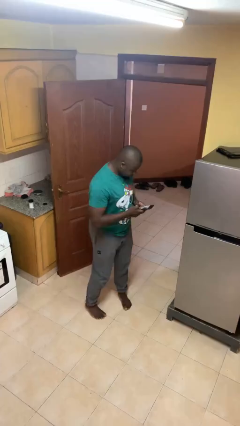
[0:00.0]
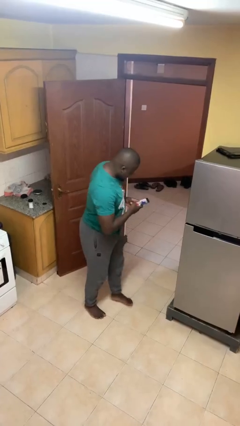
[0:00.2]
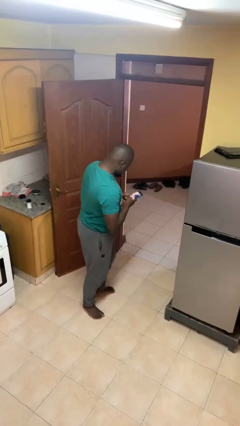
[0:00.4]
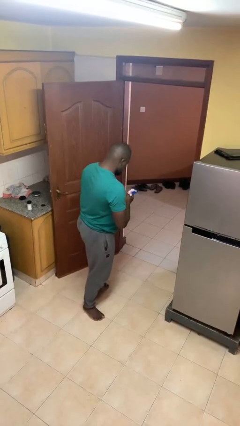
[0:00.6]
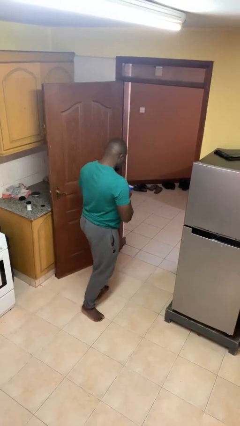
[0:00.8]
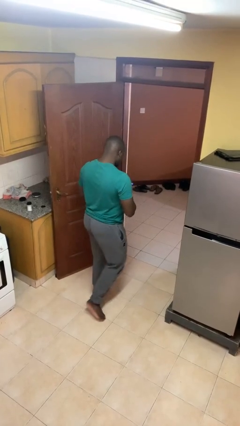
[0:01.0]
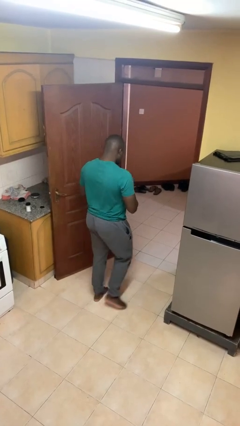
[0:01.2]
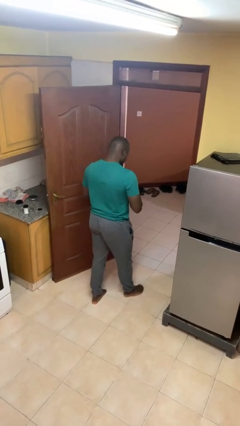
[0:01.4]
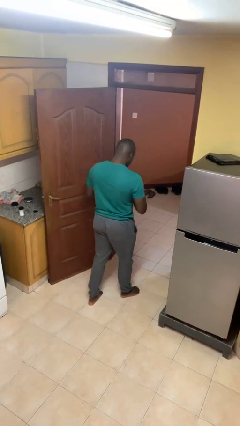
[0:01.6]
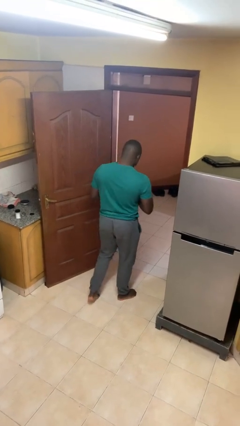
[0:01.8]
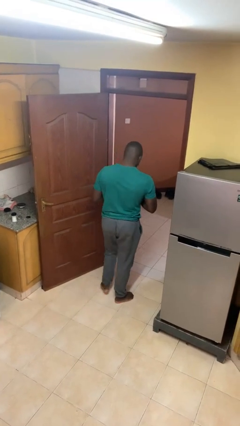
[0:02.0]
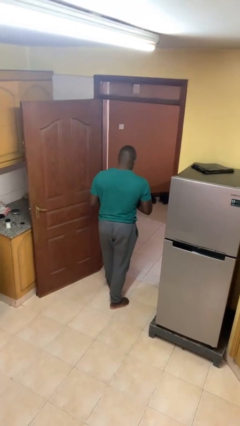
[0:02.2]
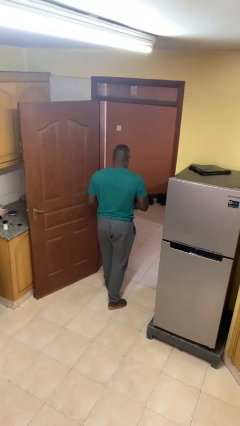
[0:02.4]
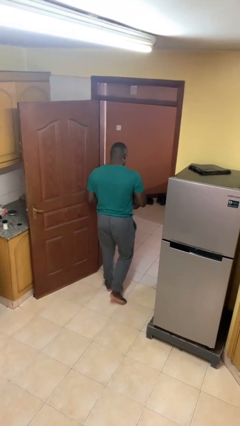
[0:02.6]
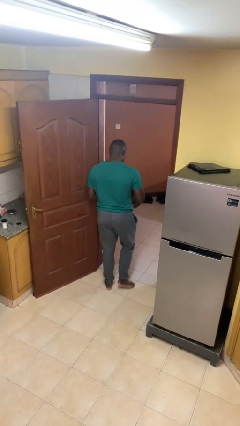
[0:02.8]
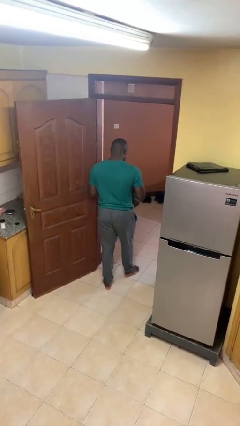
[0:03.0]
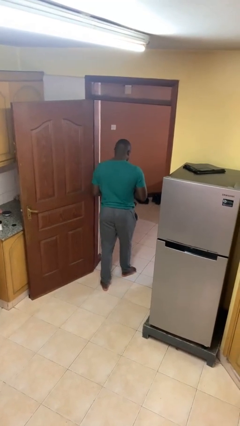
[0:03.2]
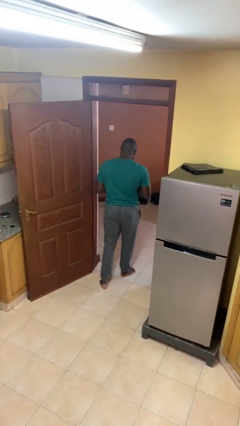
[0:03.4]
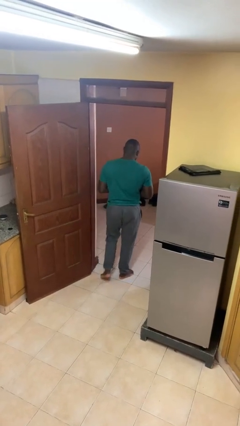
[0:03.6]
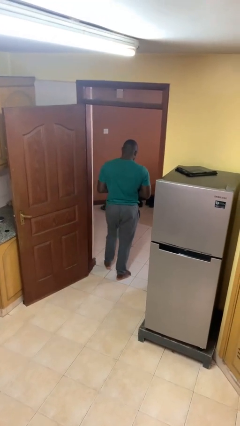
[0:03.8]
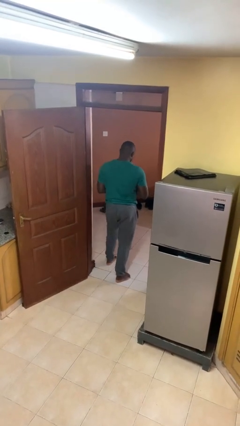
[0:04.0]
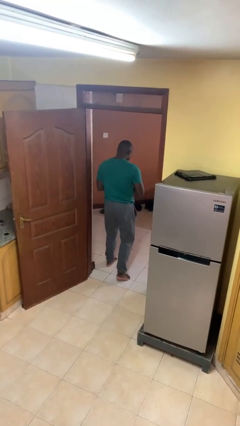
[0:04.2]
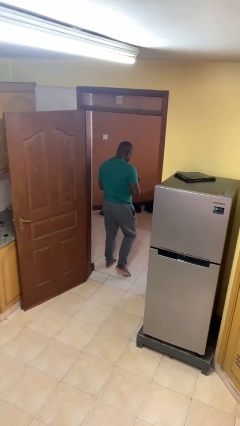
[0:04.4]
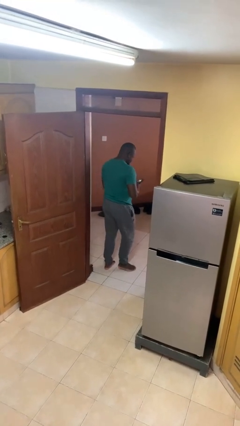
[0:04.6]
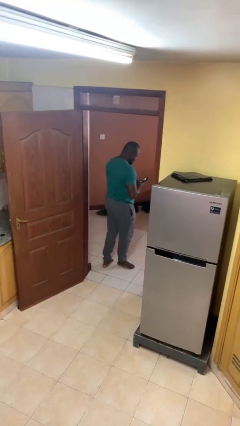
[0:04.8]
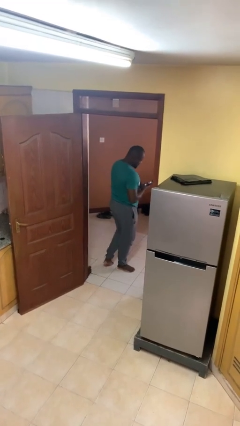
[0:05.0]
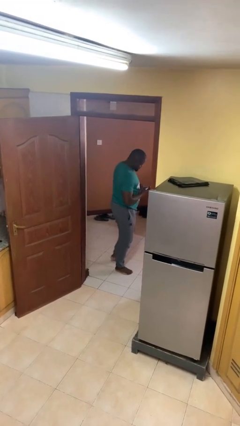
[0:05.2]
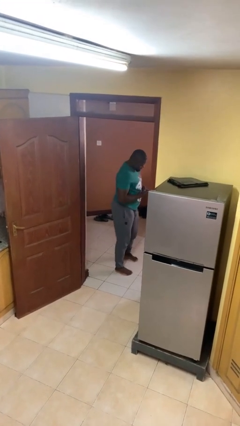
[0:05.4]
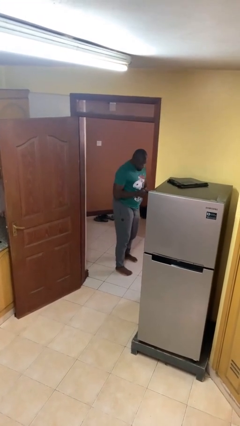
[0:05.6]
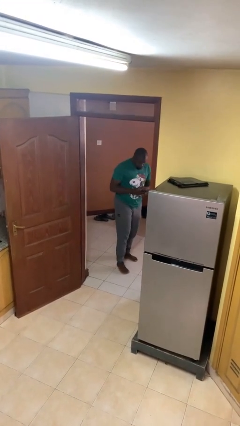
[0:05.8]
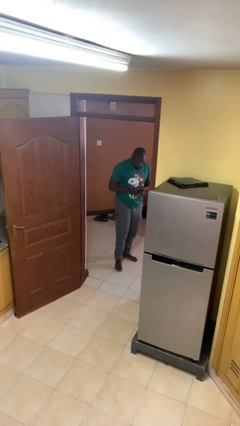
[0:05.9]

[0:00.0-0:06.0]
person exits scene through structure

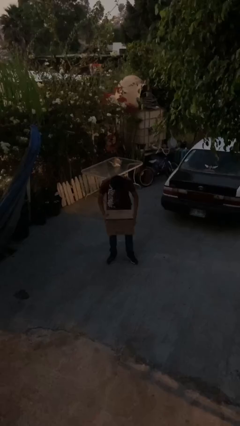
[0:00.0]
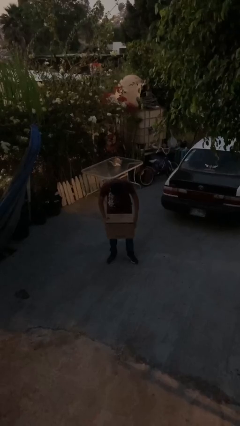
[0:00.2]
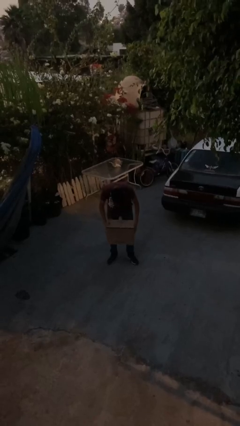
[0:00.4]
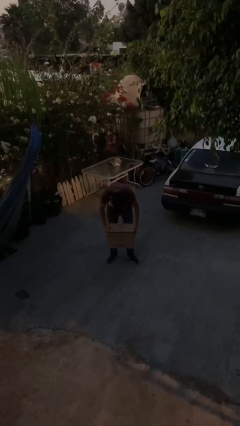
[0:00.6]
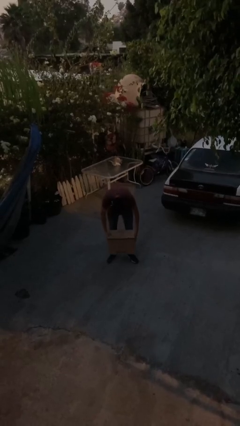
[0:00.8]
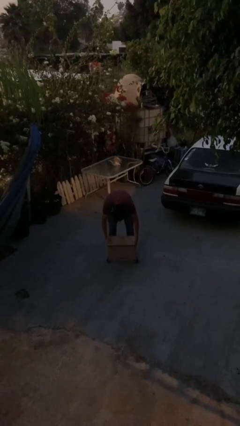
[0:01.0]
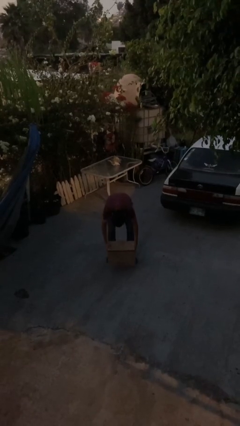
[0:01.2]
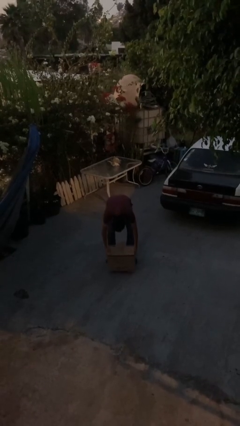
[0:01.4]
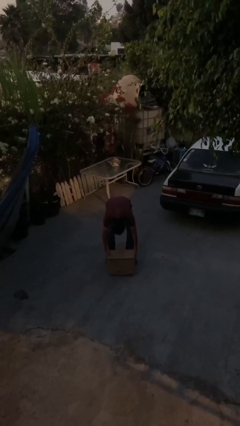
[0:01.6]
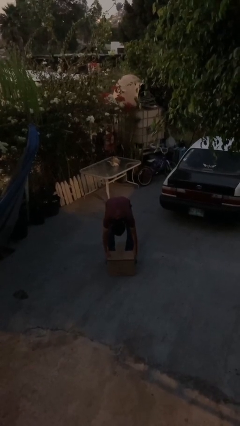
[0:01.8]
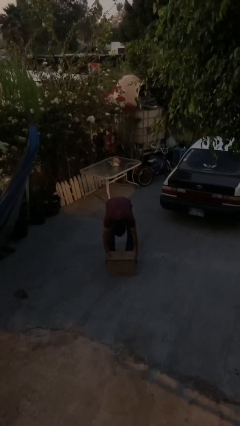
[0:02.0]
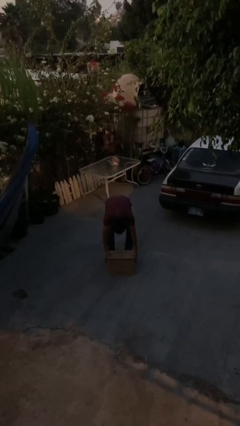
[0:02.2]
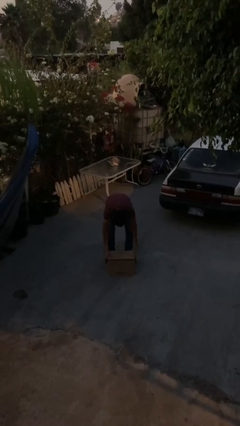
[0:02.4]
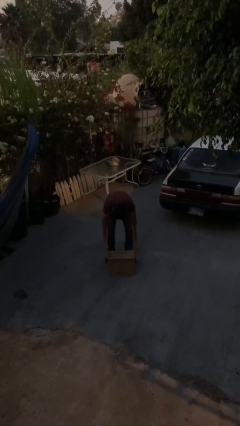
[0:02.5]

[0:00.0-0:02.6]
person puts down object on floor

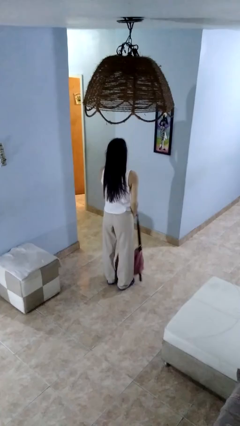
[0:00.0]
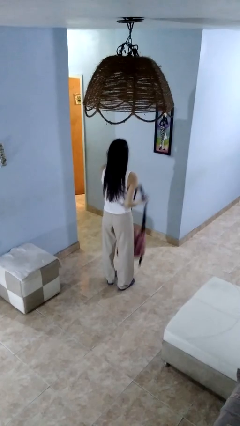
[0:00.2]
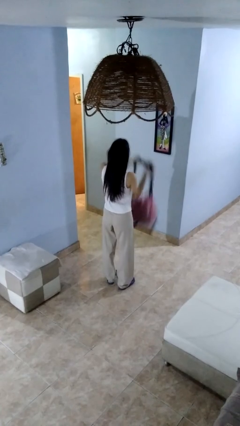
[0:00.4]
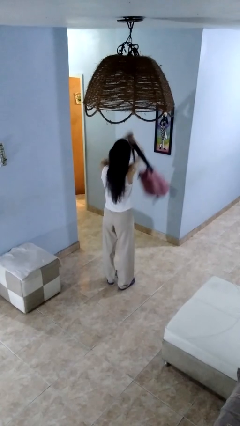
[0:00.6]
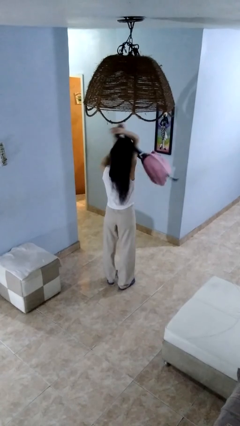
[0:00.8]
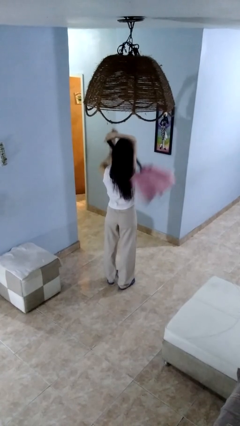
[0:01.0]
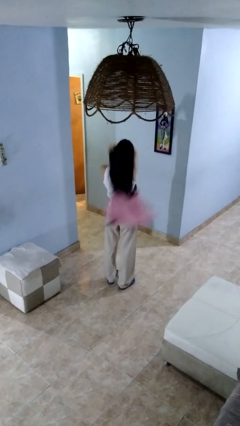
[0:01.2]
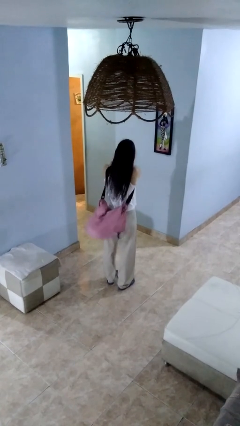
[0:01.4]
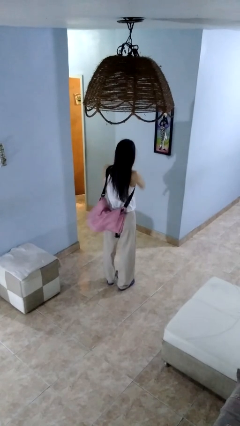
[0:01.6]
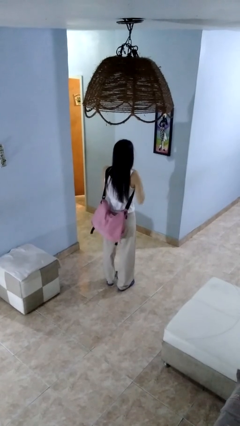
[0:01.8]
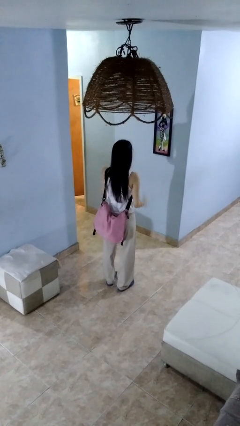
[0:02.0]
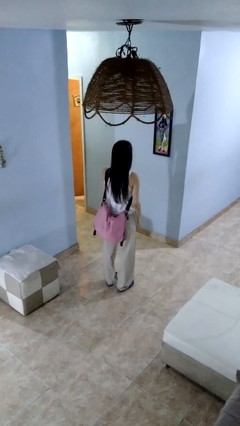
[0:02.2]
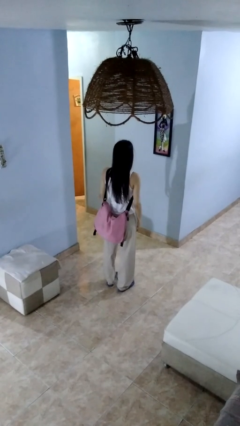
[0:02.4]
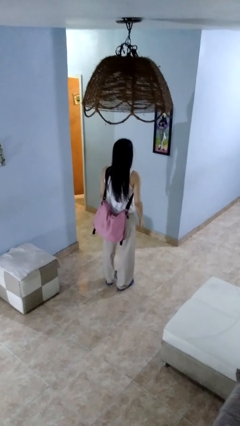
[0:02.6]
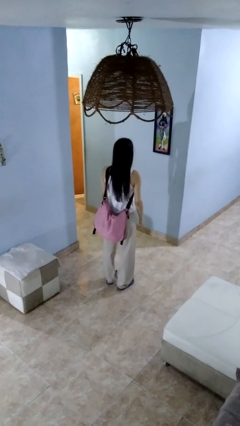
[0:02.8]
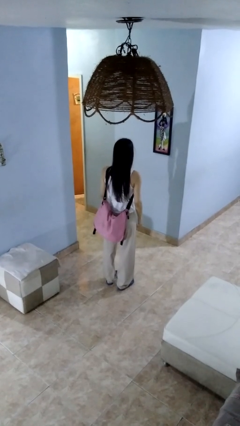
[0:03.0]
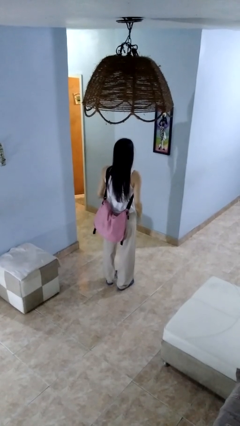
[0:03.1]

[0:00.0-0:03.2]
person puts on backpack

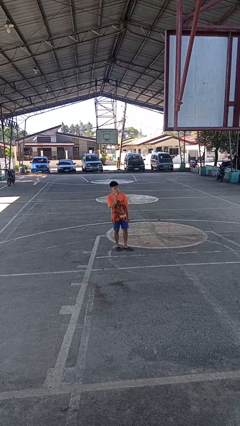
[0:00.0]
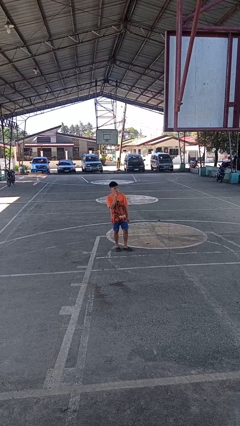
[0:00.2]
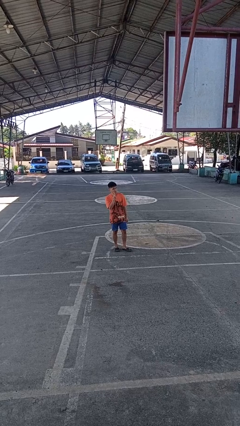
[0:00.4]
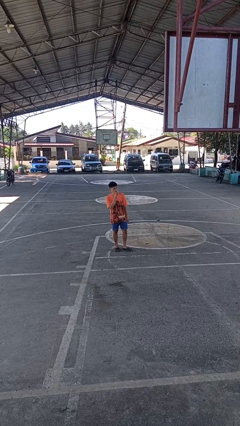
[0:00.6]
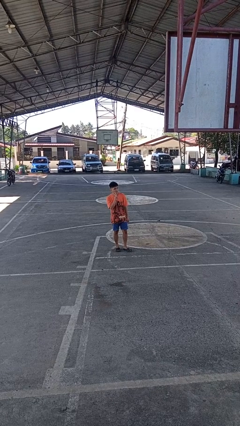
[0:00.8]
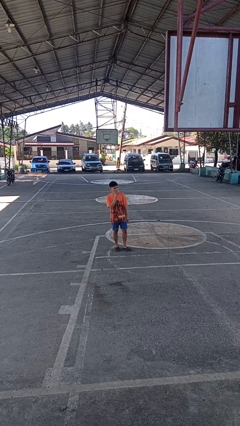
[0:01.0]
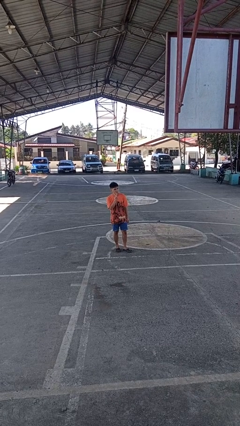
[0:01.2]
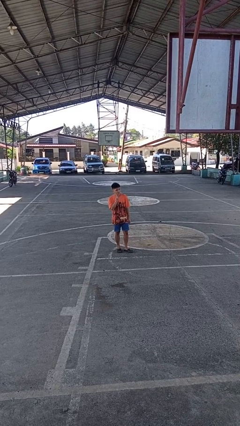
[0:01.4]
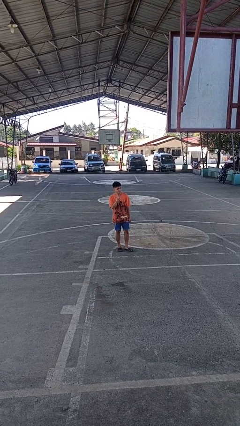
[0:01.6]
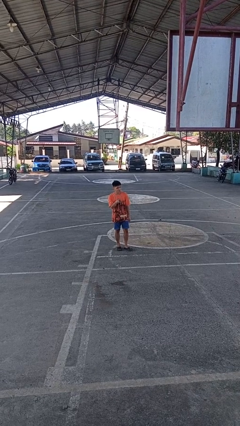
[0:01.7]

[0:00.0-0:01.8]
person gestures peace

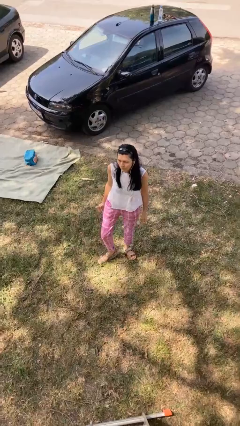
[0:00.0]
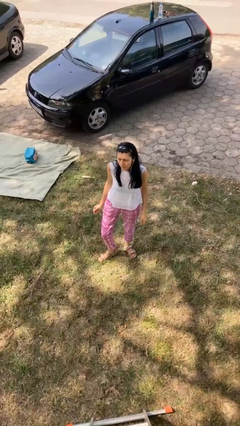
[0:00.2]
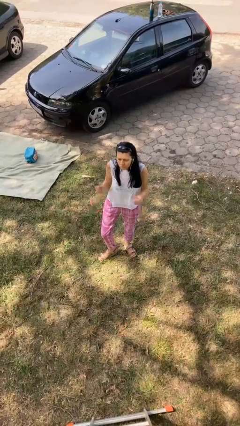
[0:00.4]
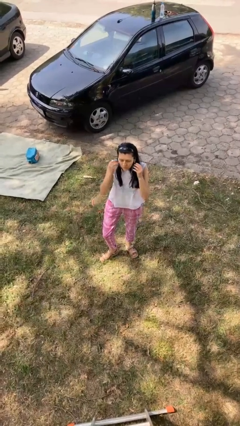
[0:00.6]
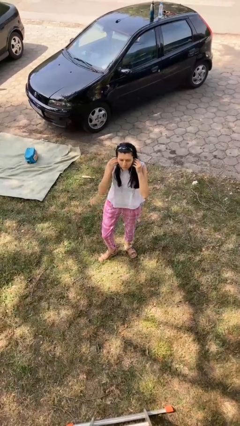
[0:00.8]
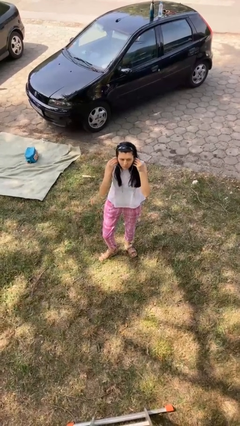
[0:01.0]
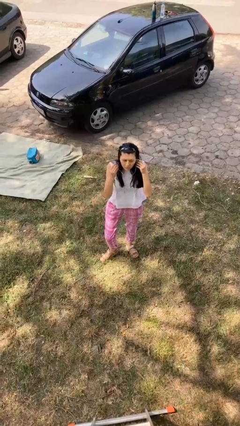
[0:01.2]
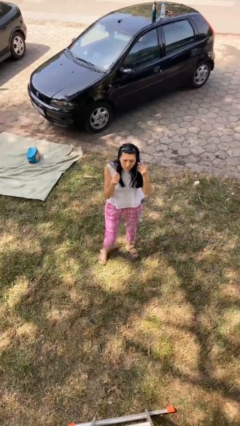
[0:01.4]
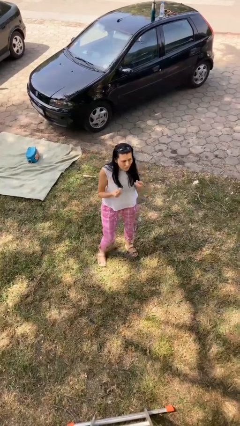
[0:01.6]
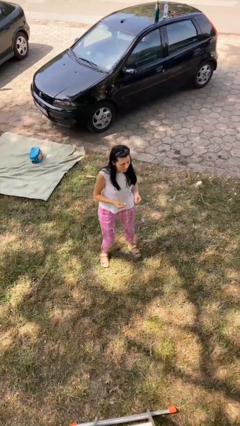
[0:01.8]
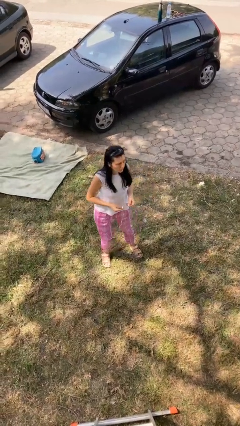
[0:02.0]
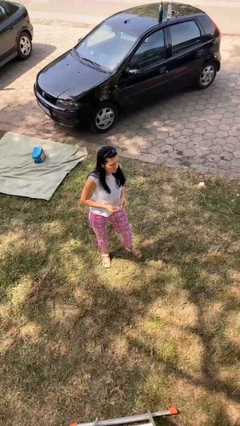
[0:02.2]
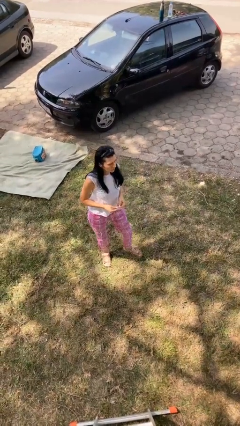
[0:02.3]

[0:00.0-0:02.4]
person takes off headphones

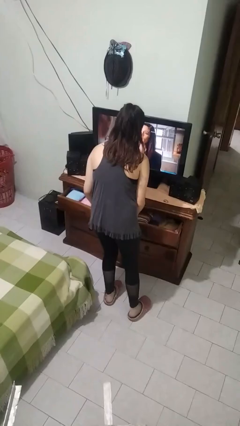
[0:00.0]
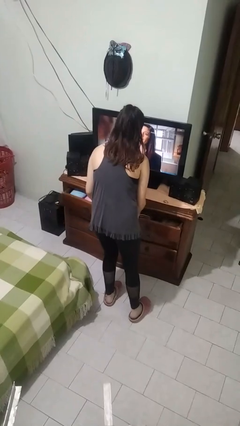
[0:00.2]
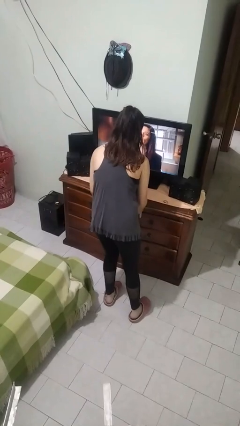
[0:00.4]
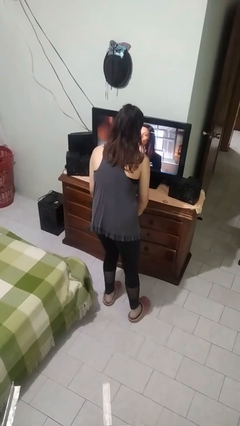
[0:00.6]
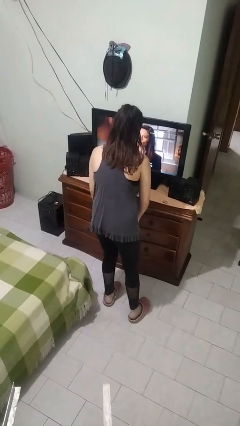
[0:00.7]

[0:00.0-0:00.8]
person closes dresser drawer

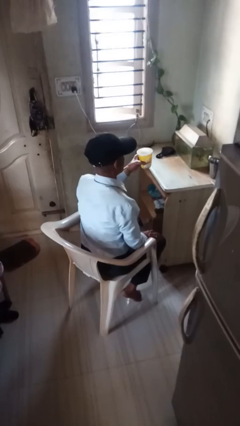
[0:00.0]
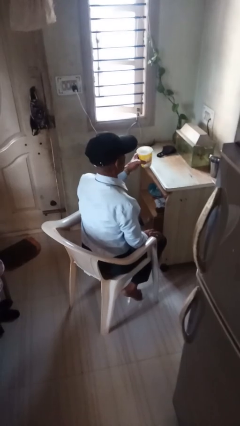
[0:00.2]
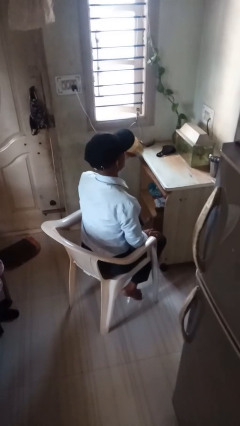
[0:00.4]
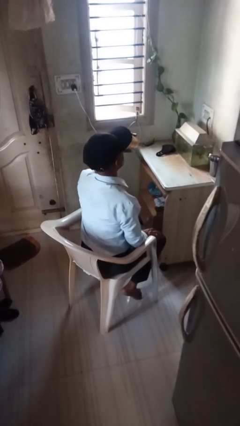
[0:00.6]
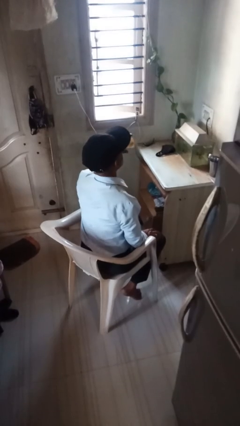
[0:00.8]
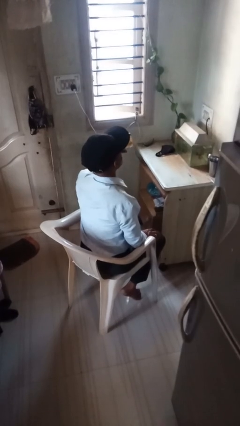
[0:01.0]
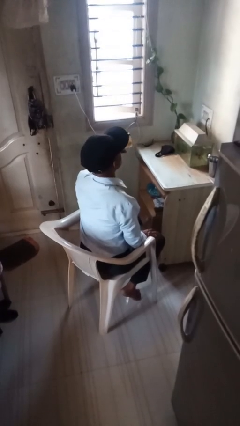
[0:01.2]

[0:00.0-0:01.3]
person drinks from mug
